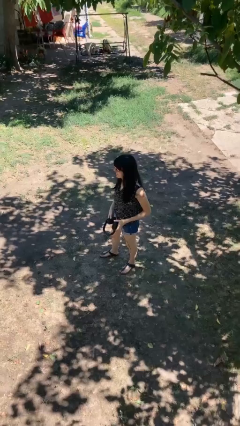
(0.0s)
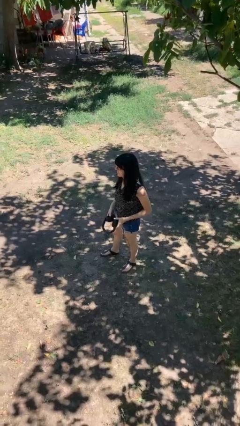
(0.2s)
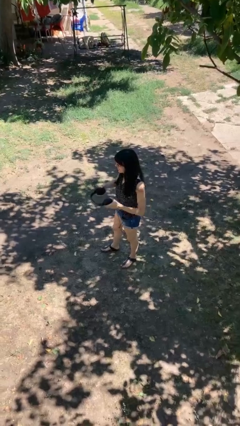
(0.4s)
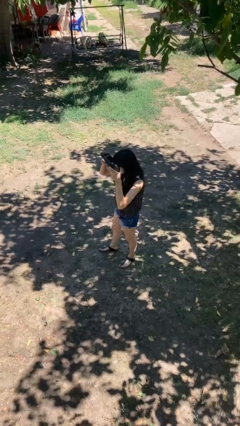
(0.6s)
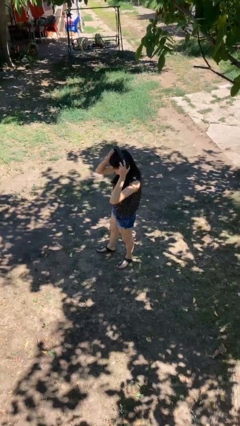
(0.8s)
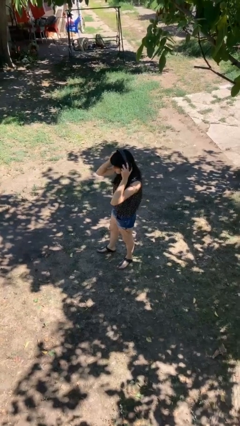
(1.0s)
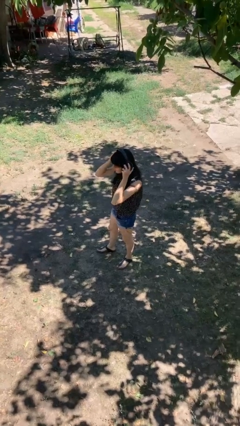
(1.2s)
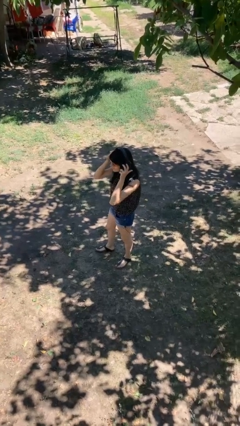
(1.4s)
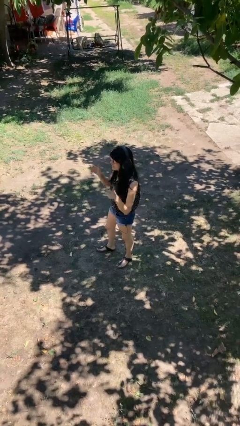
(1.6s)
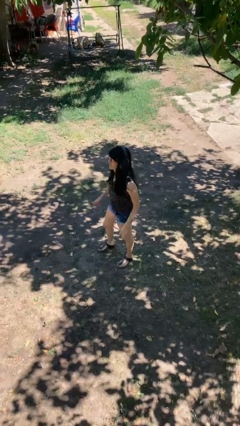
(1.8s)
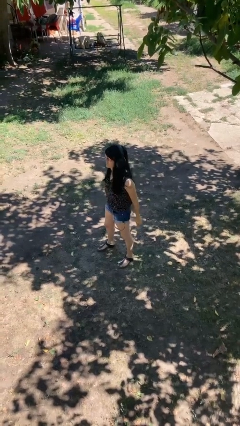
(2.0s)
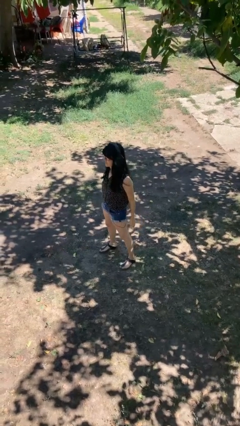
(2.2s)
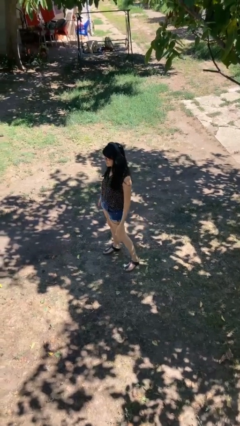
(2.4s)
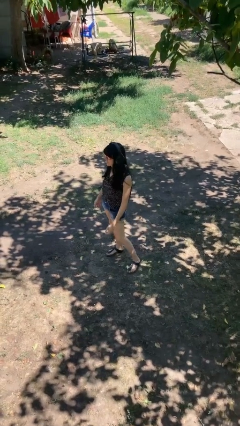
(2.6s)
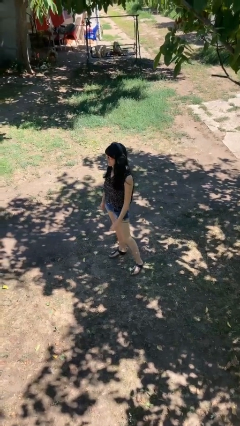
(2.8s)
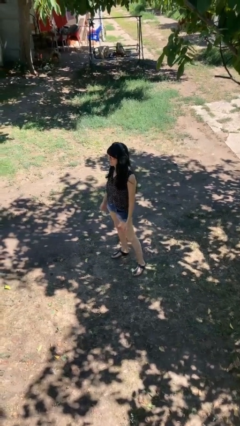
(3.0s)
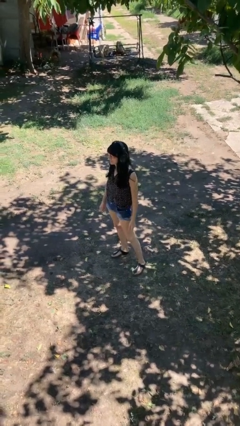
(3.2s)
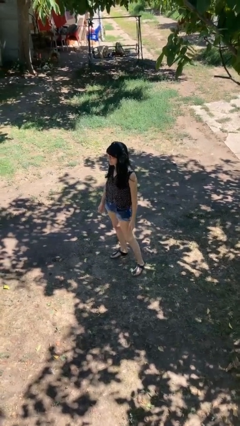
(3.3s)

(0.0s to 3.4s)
person puts on headphones

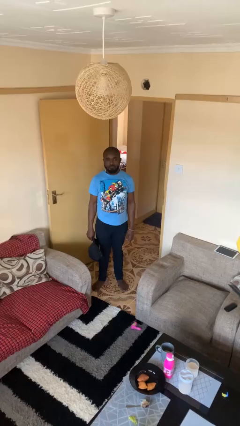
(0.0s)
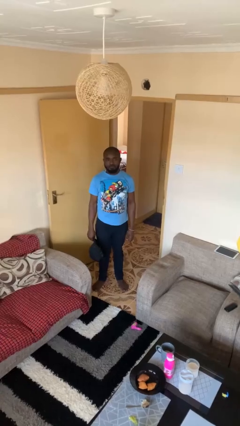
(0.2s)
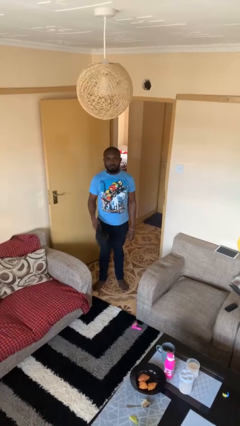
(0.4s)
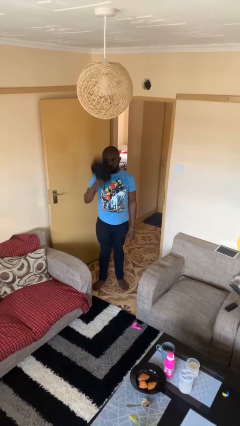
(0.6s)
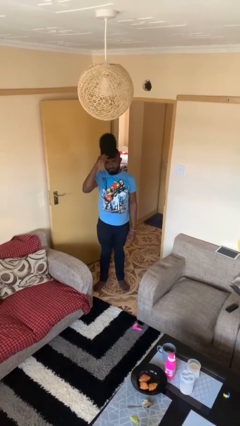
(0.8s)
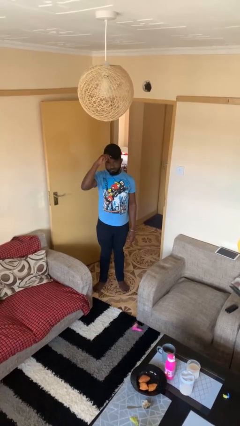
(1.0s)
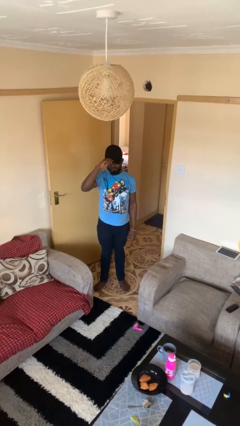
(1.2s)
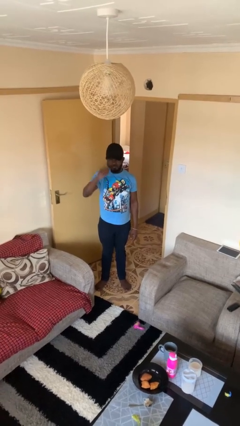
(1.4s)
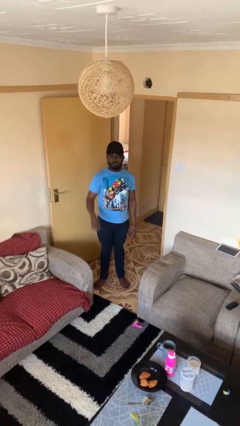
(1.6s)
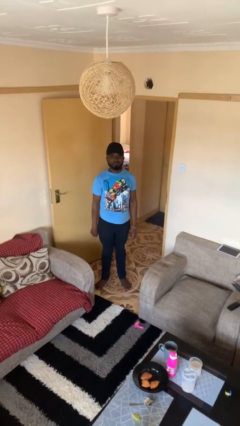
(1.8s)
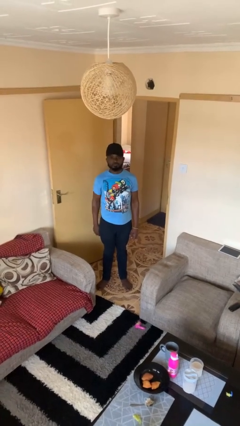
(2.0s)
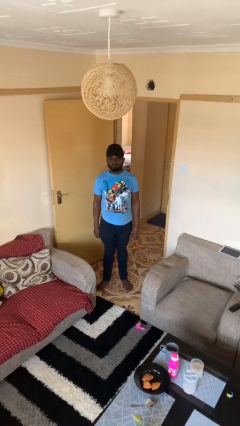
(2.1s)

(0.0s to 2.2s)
person puts on hat

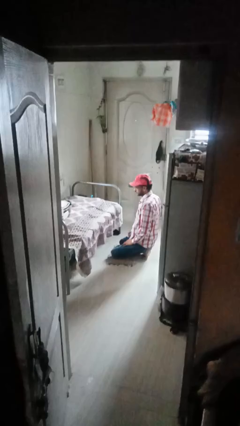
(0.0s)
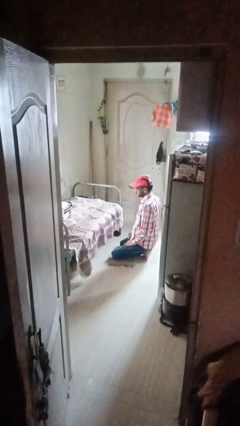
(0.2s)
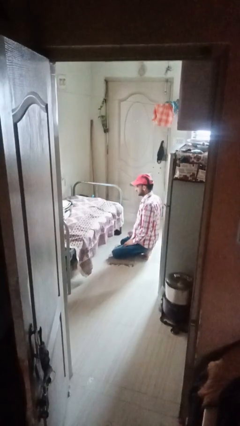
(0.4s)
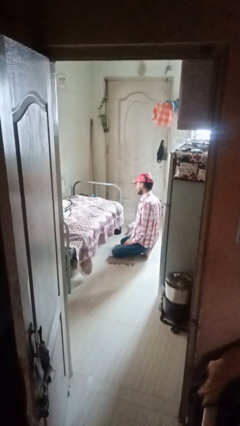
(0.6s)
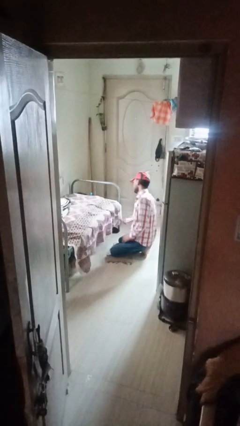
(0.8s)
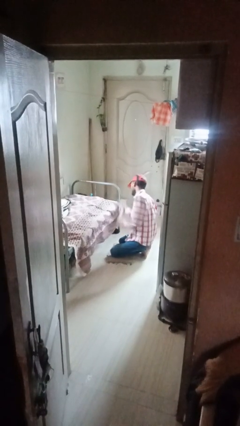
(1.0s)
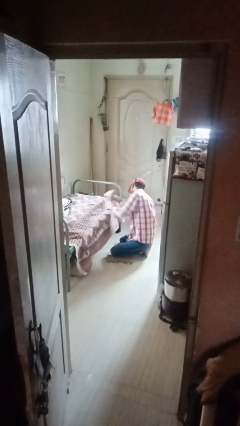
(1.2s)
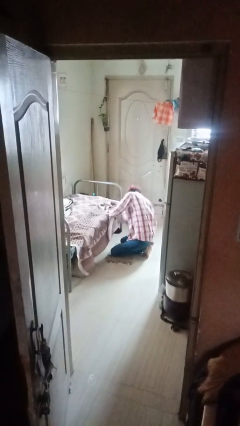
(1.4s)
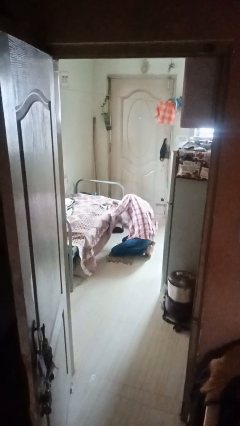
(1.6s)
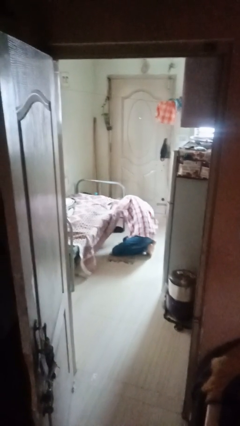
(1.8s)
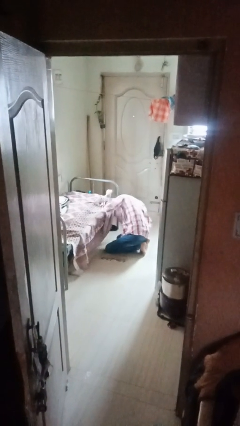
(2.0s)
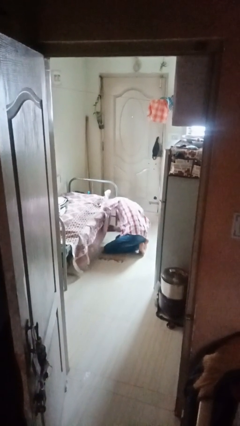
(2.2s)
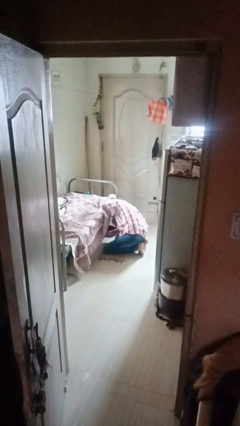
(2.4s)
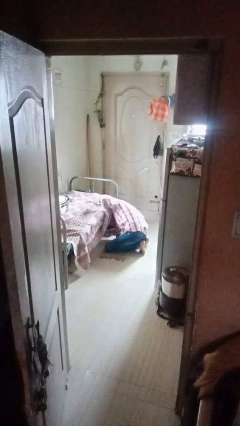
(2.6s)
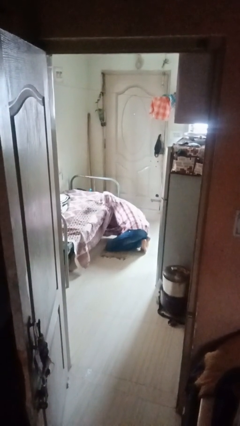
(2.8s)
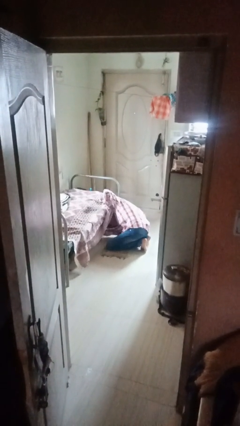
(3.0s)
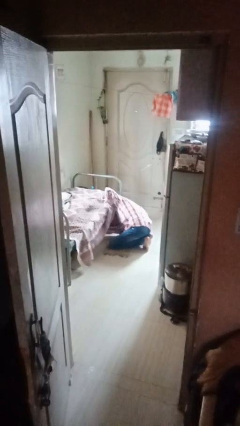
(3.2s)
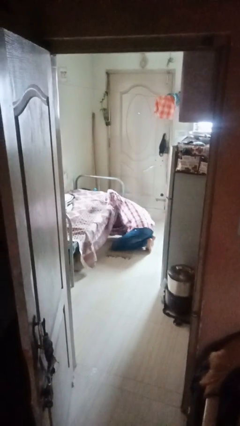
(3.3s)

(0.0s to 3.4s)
person searches under bed

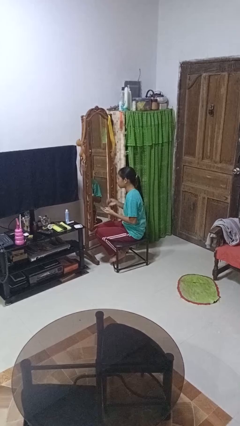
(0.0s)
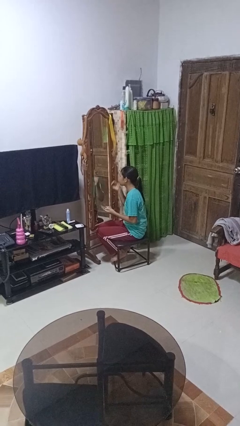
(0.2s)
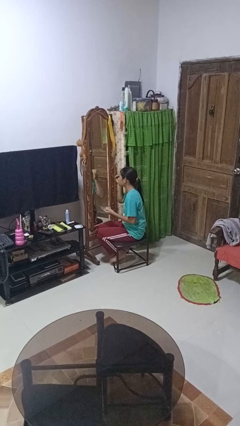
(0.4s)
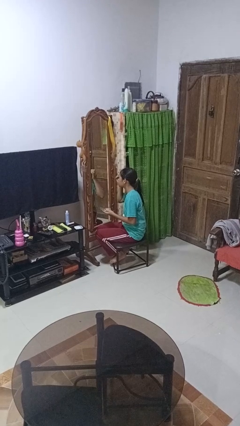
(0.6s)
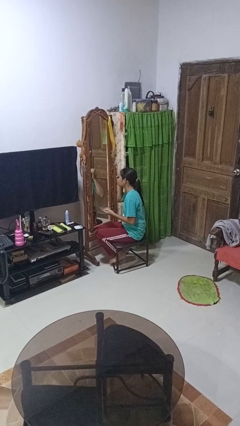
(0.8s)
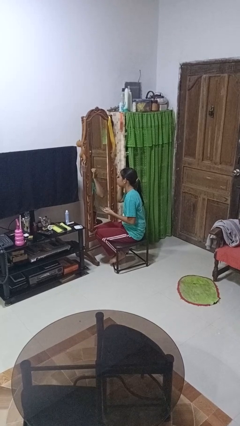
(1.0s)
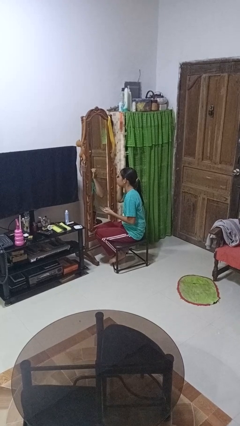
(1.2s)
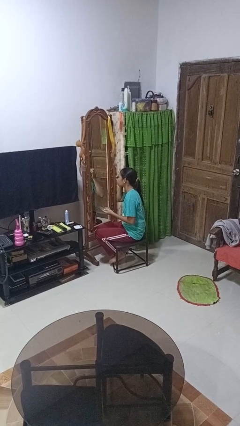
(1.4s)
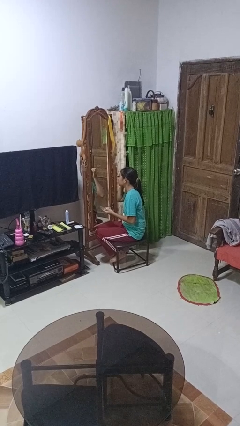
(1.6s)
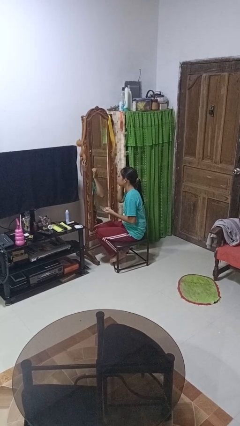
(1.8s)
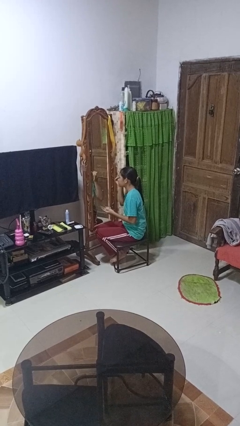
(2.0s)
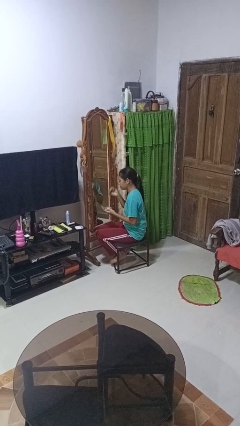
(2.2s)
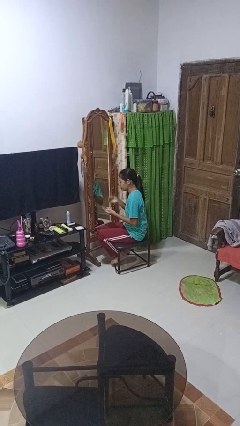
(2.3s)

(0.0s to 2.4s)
person applies eye makeup

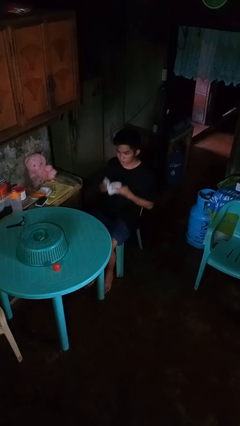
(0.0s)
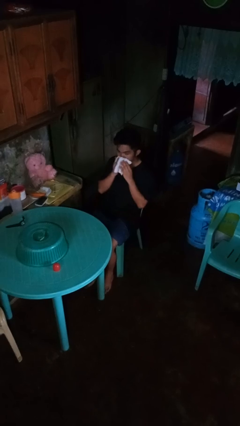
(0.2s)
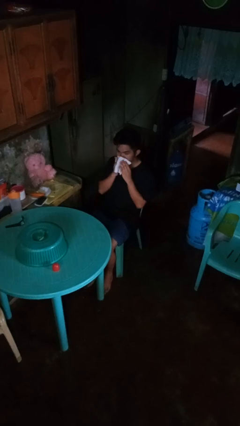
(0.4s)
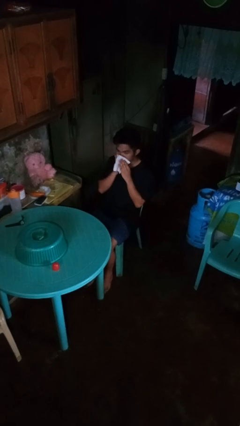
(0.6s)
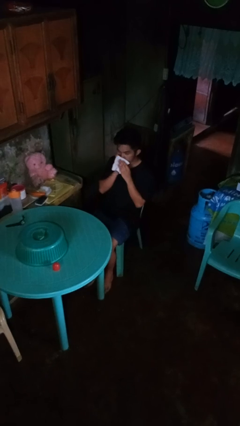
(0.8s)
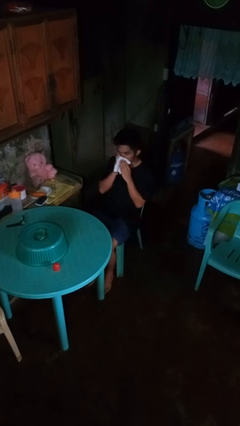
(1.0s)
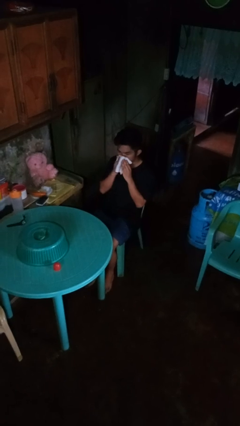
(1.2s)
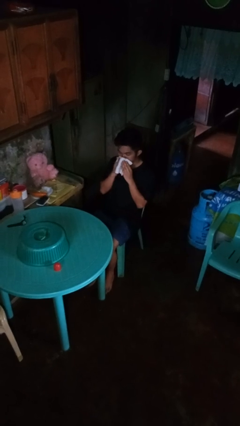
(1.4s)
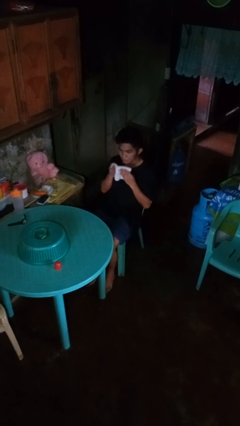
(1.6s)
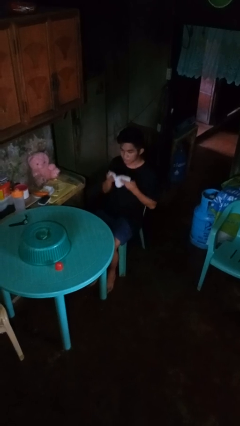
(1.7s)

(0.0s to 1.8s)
person wipes mouth with napkin

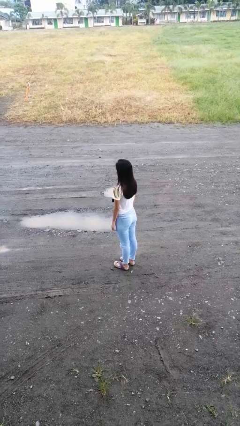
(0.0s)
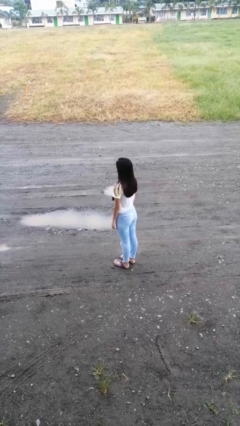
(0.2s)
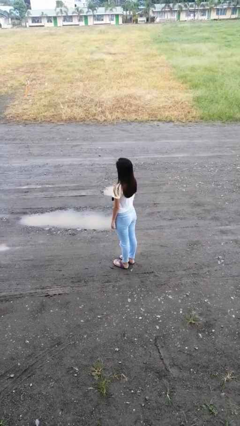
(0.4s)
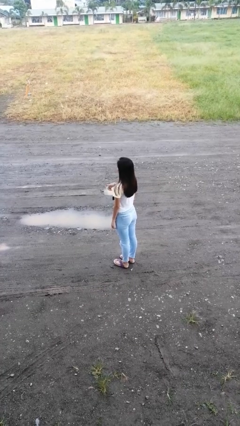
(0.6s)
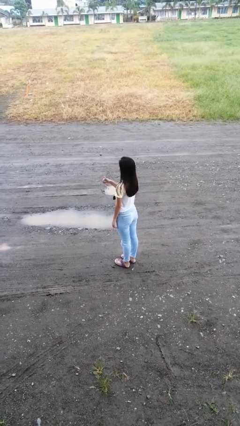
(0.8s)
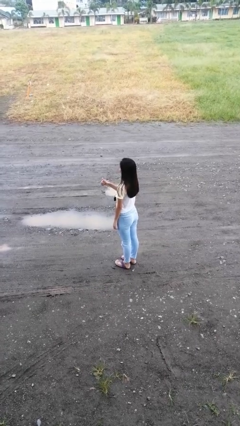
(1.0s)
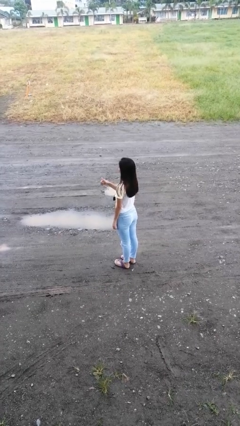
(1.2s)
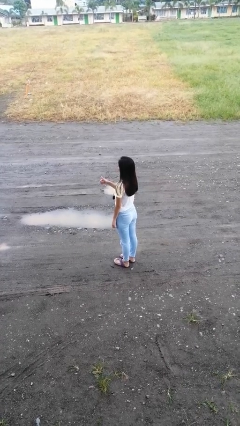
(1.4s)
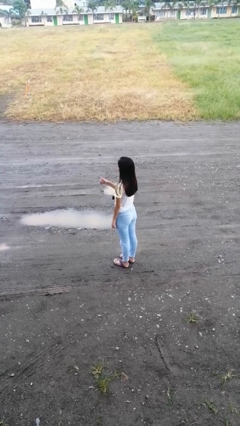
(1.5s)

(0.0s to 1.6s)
person gestures thumbs up

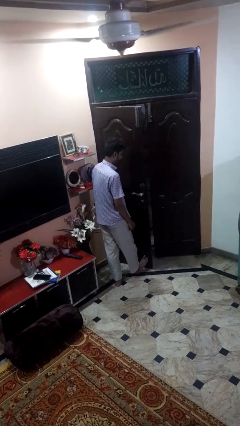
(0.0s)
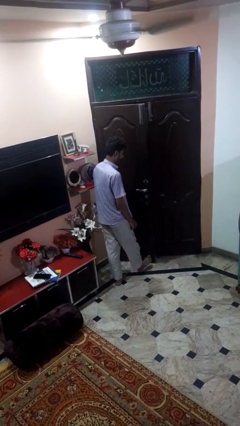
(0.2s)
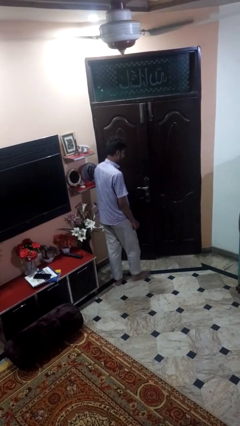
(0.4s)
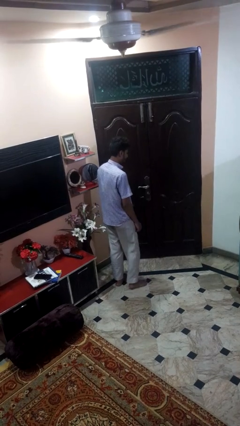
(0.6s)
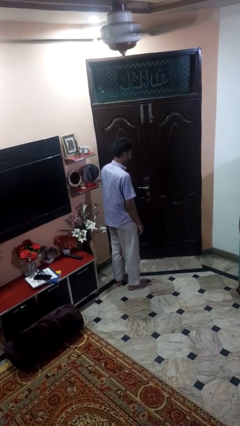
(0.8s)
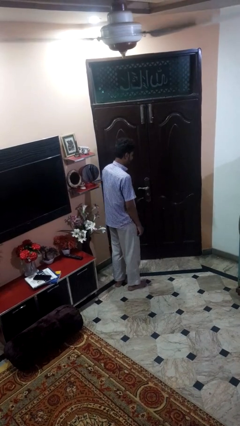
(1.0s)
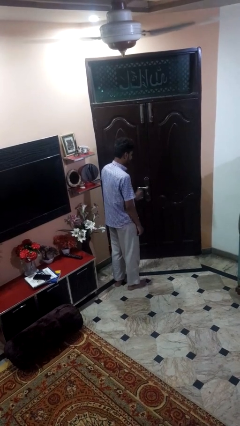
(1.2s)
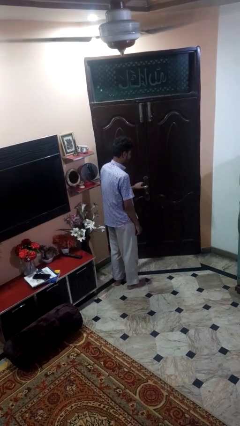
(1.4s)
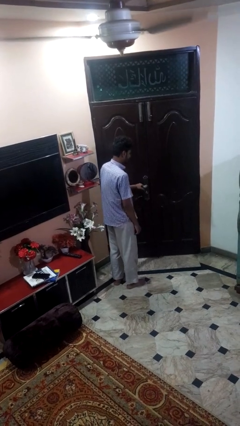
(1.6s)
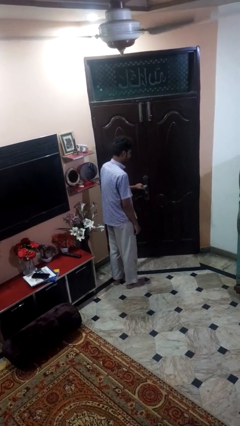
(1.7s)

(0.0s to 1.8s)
person closes door with foot

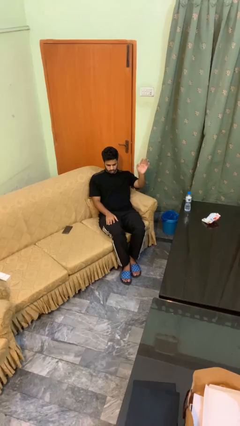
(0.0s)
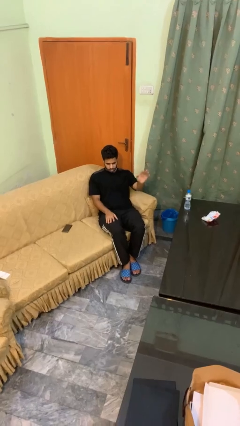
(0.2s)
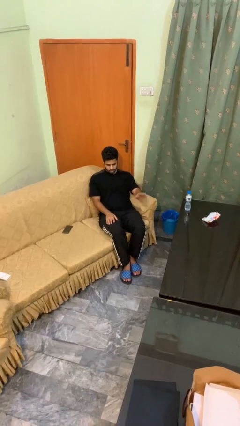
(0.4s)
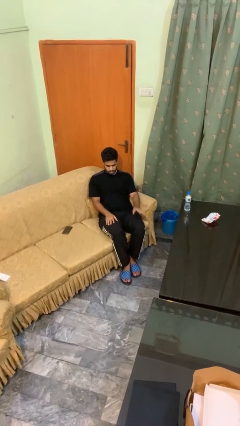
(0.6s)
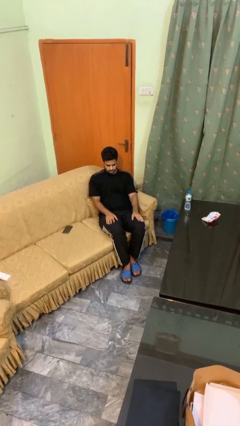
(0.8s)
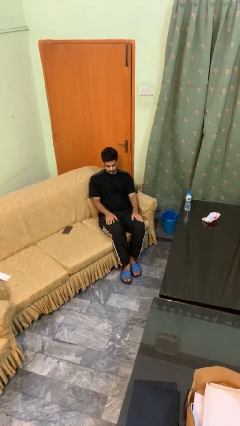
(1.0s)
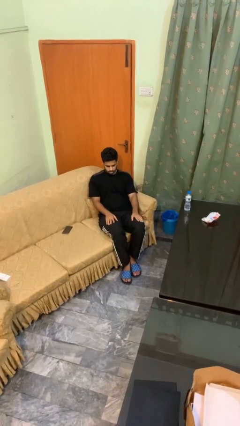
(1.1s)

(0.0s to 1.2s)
person gestures lower hand
